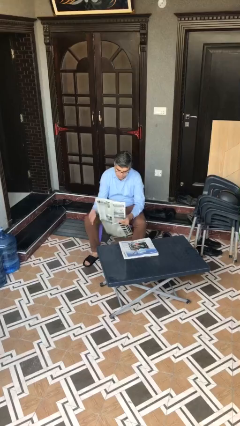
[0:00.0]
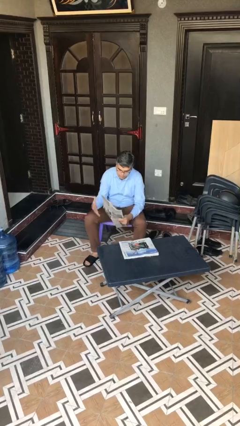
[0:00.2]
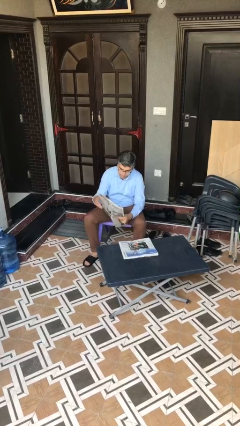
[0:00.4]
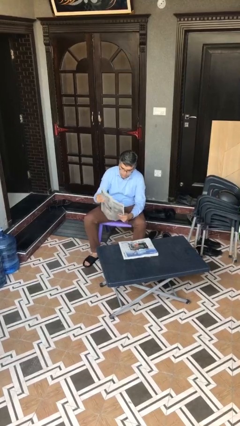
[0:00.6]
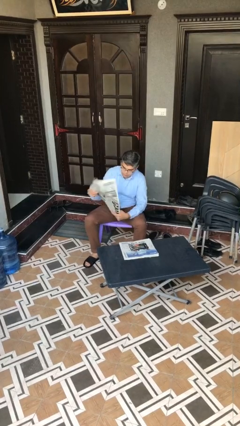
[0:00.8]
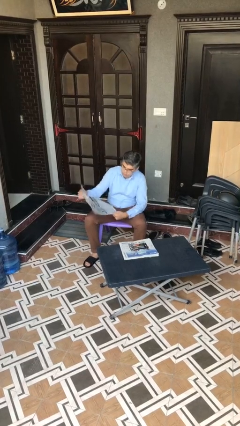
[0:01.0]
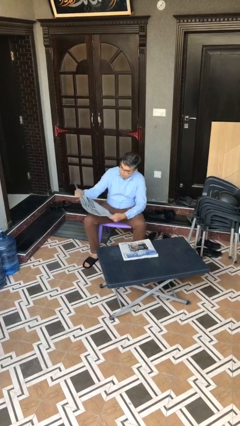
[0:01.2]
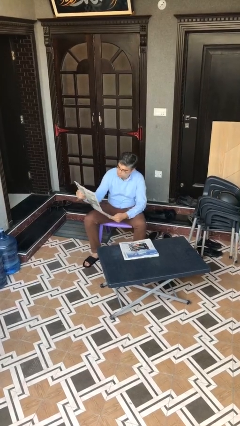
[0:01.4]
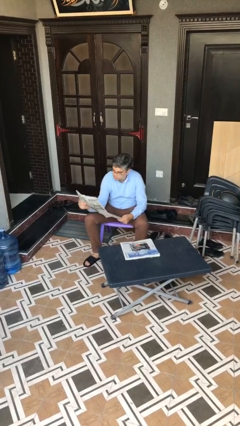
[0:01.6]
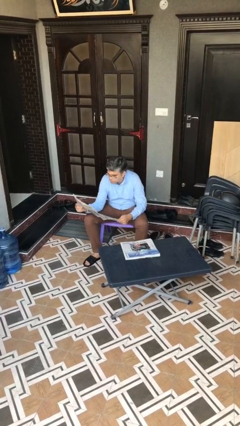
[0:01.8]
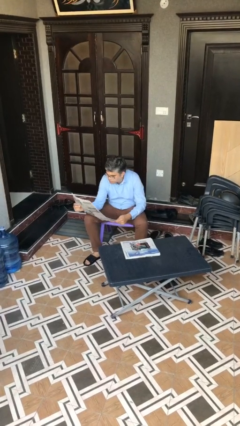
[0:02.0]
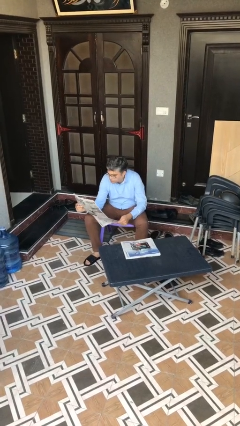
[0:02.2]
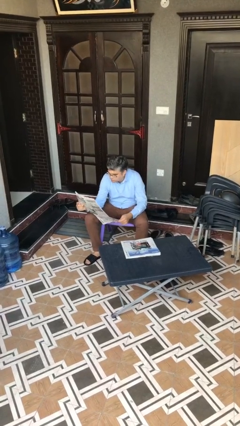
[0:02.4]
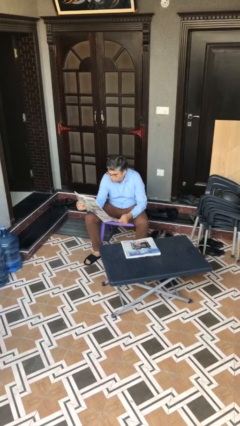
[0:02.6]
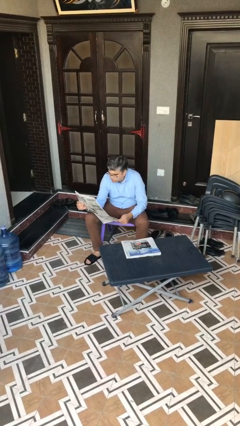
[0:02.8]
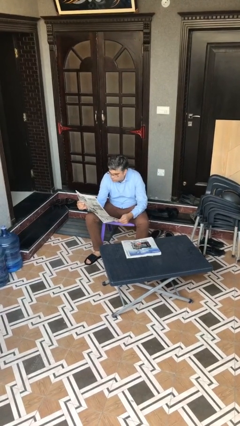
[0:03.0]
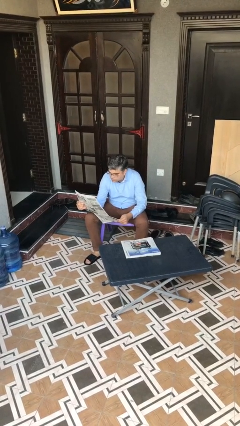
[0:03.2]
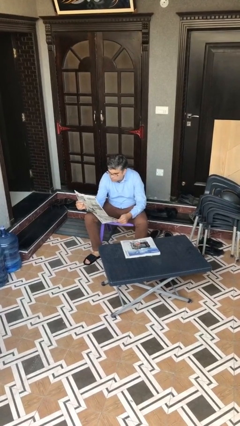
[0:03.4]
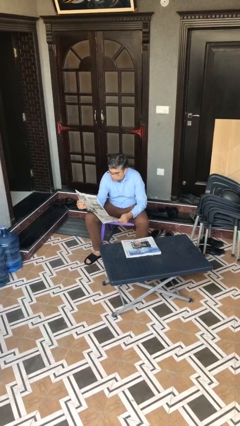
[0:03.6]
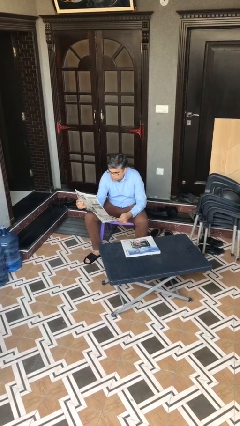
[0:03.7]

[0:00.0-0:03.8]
person reads document

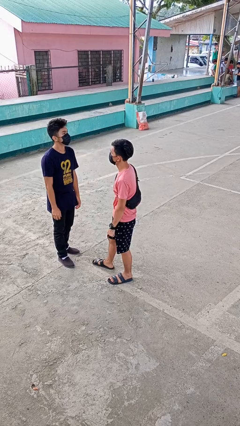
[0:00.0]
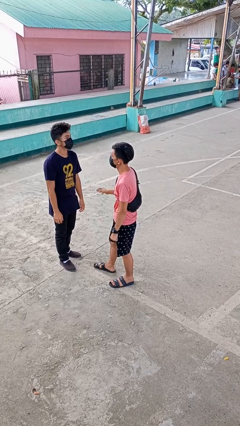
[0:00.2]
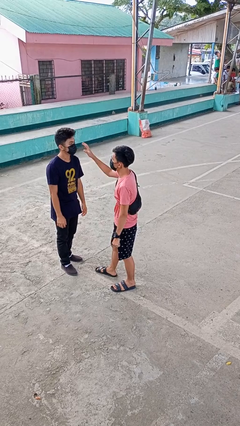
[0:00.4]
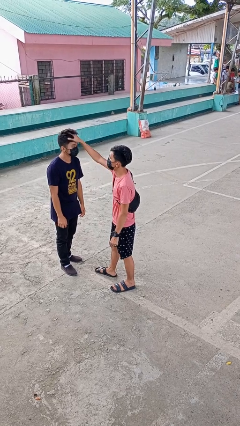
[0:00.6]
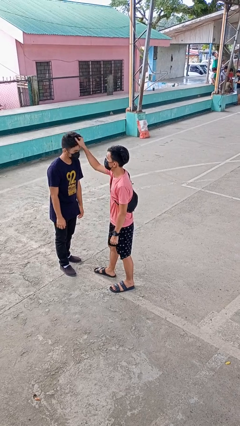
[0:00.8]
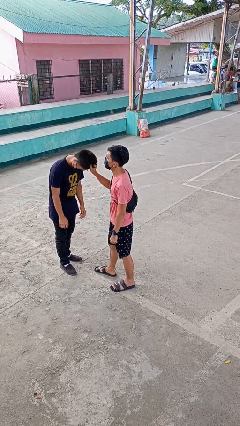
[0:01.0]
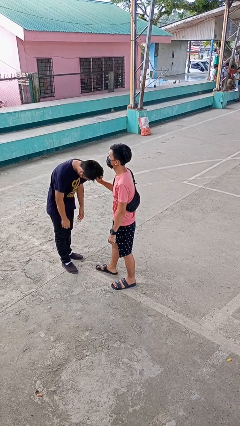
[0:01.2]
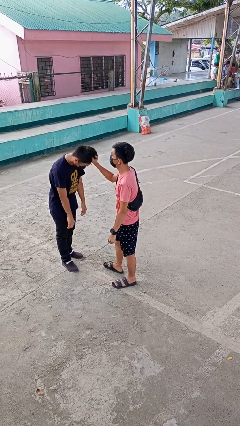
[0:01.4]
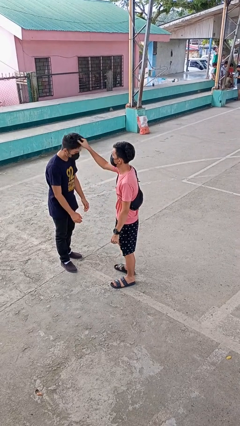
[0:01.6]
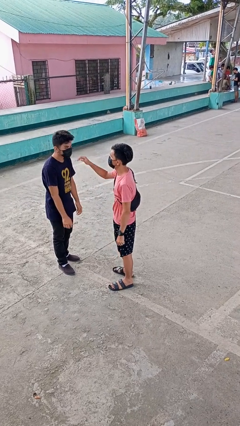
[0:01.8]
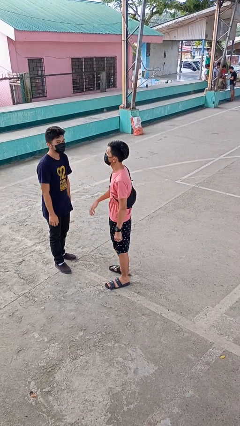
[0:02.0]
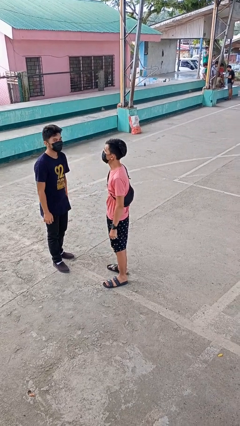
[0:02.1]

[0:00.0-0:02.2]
person grabs person by hair

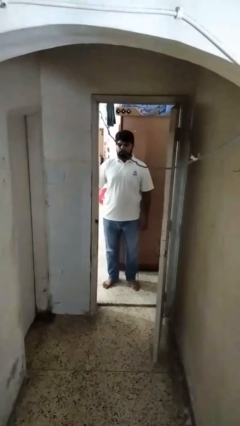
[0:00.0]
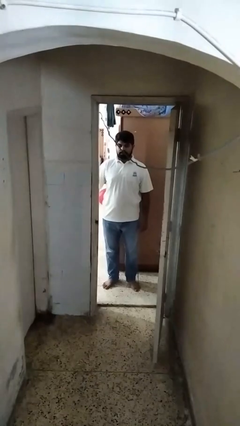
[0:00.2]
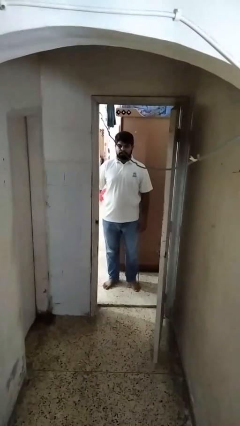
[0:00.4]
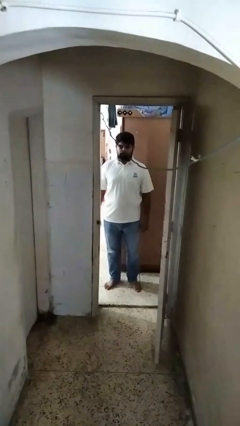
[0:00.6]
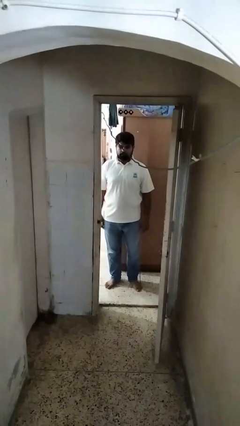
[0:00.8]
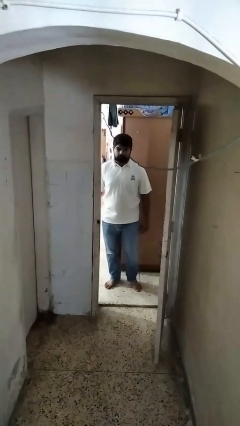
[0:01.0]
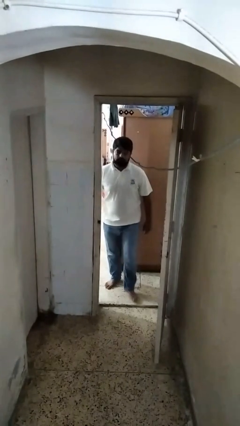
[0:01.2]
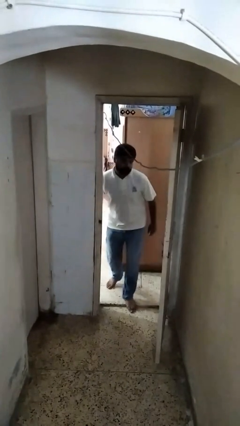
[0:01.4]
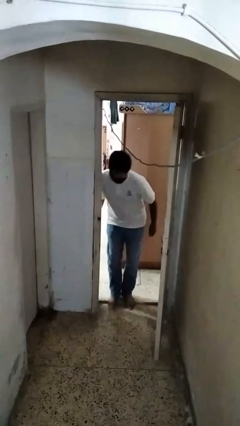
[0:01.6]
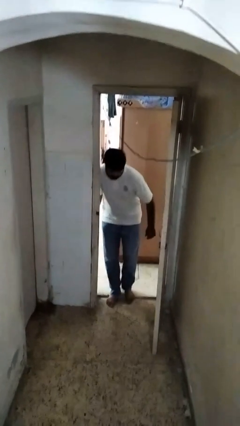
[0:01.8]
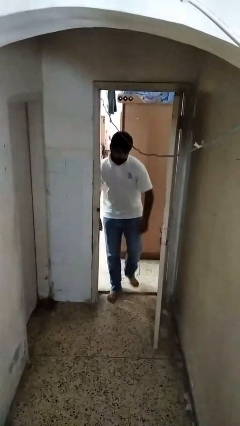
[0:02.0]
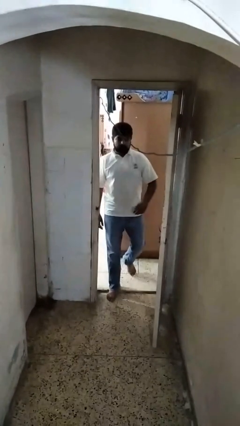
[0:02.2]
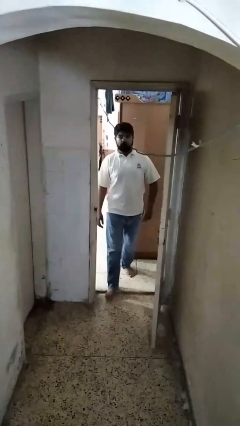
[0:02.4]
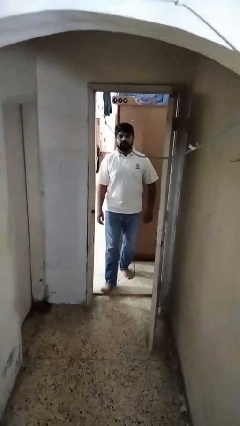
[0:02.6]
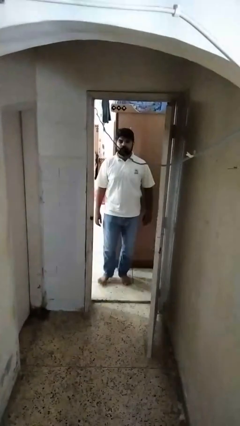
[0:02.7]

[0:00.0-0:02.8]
person bumps into wall

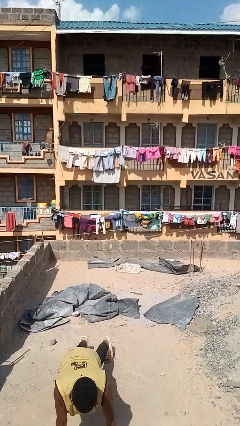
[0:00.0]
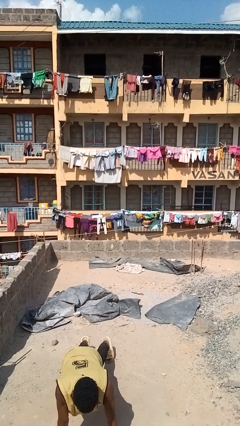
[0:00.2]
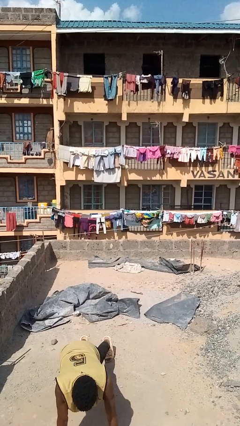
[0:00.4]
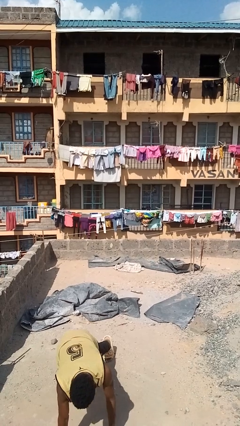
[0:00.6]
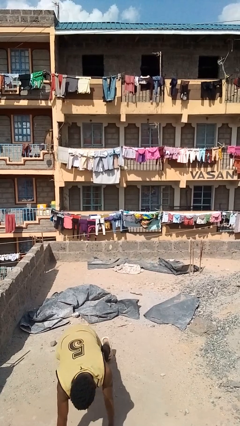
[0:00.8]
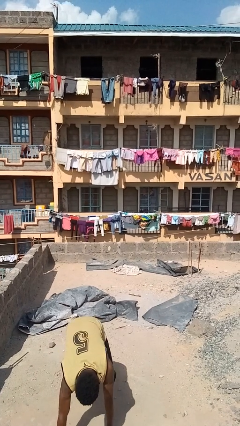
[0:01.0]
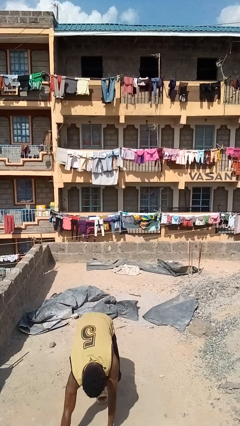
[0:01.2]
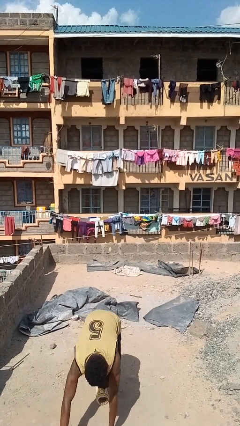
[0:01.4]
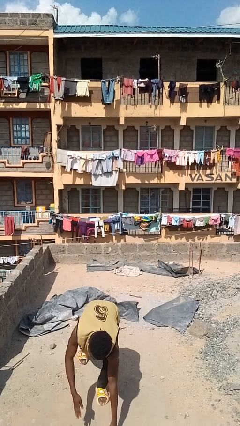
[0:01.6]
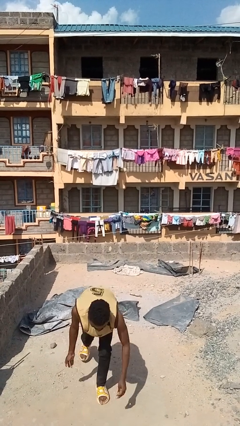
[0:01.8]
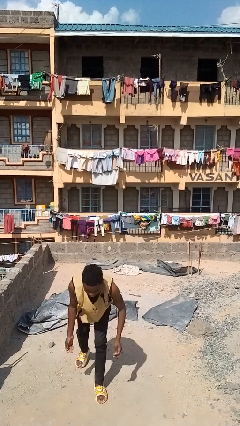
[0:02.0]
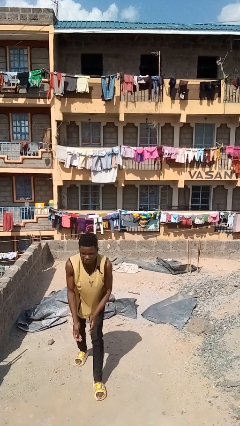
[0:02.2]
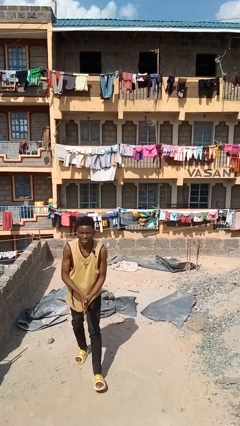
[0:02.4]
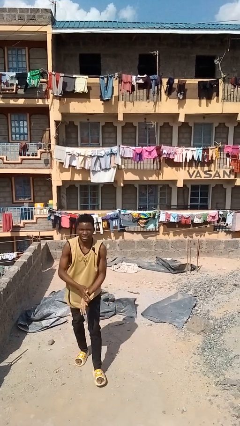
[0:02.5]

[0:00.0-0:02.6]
person stands up from floor

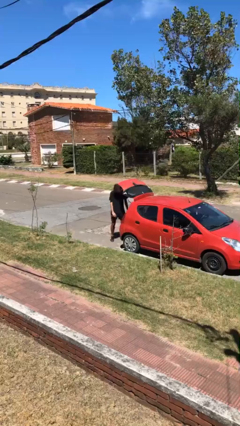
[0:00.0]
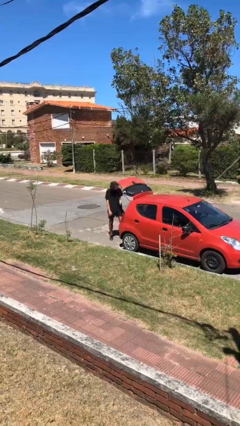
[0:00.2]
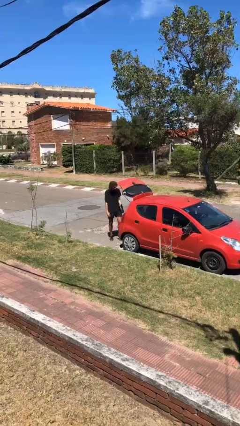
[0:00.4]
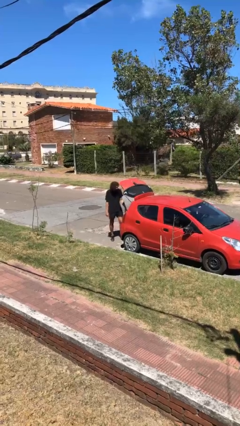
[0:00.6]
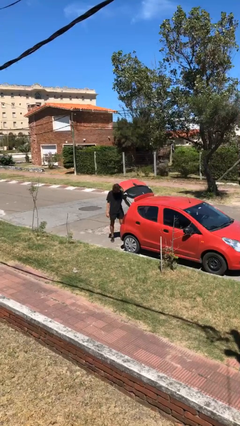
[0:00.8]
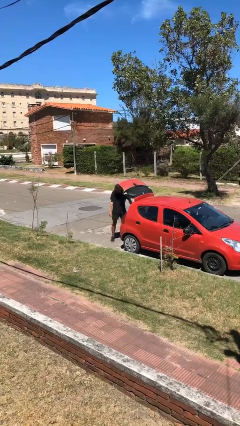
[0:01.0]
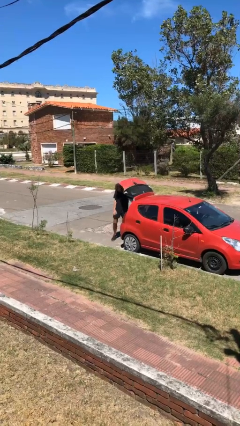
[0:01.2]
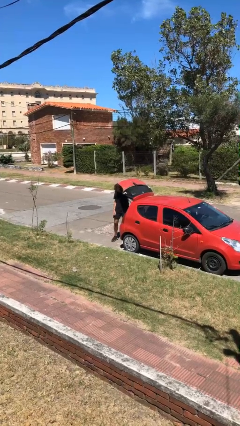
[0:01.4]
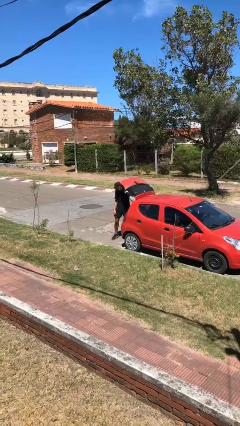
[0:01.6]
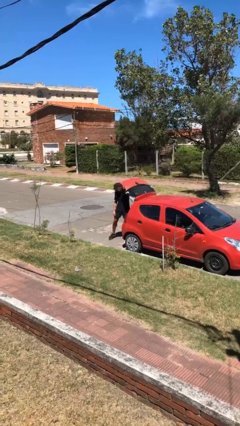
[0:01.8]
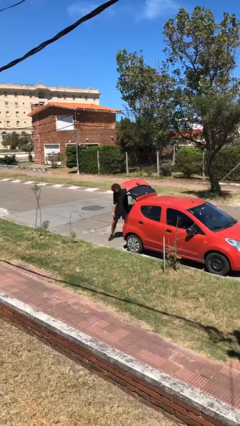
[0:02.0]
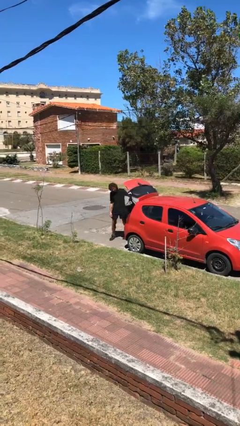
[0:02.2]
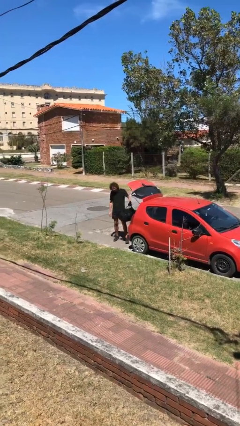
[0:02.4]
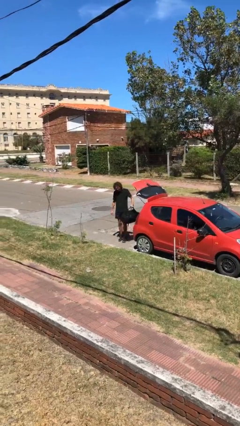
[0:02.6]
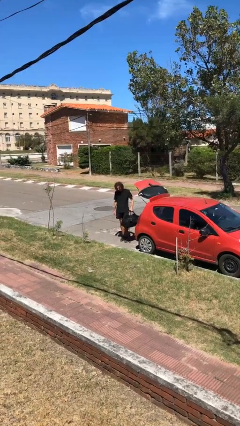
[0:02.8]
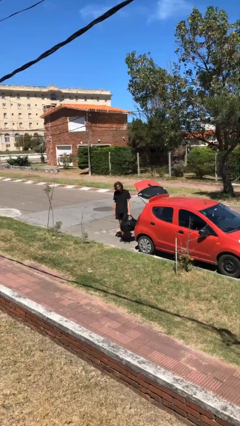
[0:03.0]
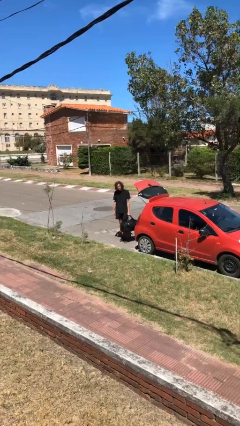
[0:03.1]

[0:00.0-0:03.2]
person unloads car

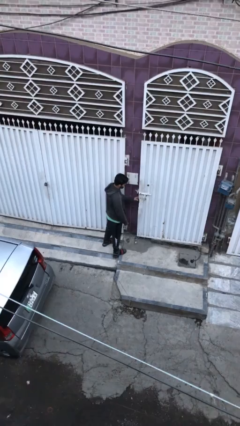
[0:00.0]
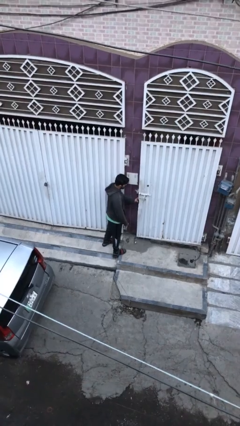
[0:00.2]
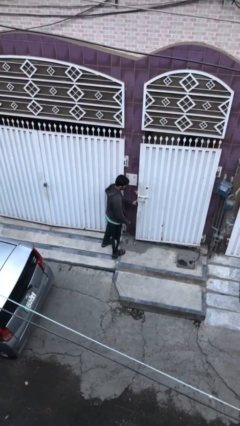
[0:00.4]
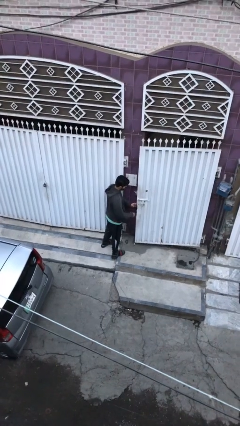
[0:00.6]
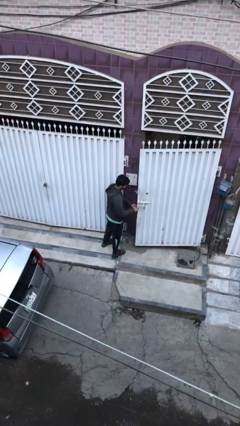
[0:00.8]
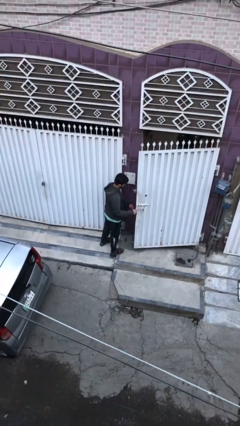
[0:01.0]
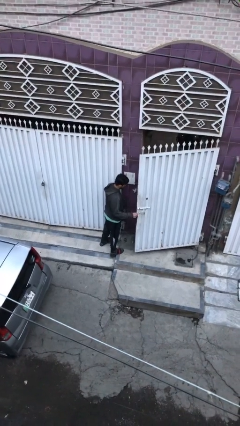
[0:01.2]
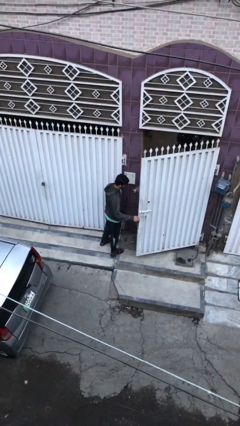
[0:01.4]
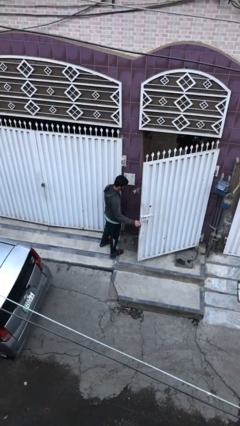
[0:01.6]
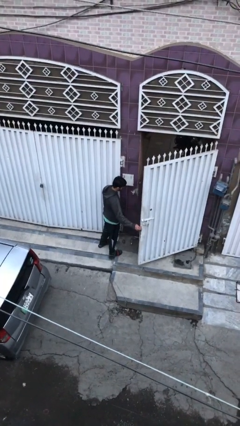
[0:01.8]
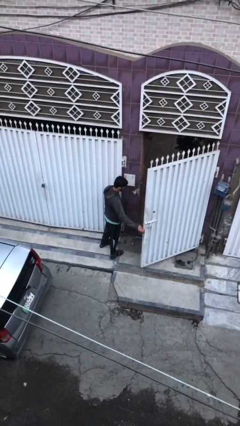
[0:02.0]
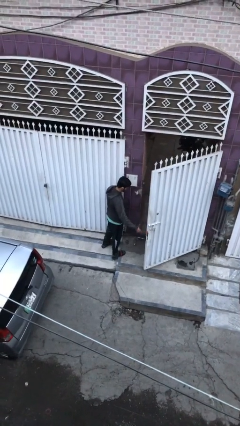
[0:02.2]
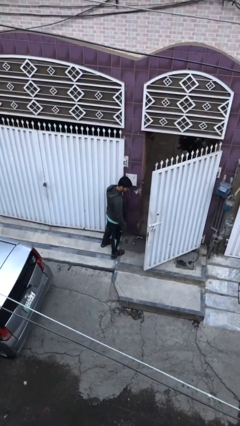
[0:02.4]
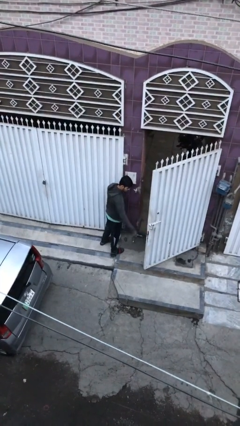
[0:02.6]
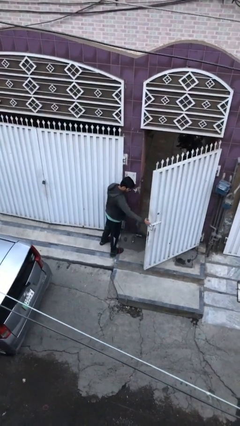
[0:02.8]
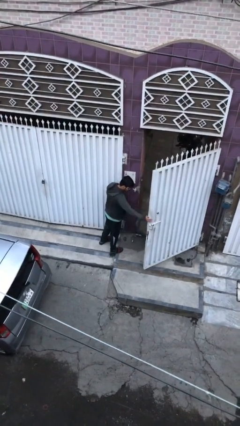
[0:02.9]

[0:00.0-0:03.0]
person opens facility door
